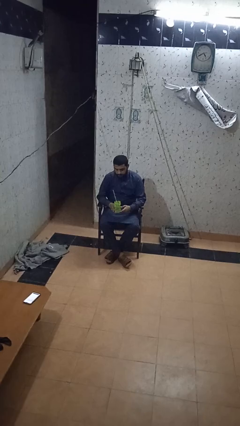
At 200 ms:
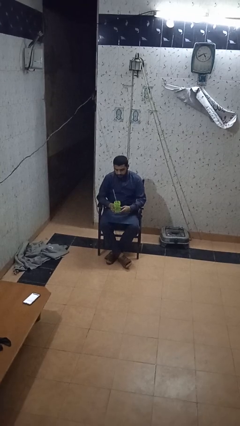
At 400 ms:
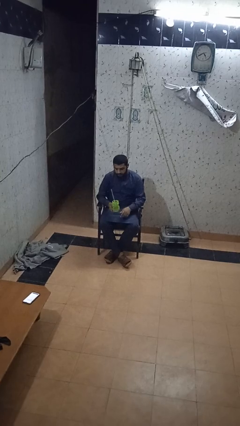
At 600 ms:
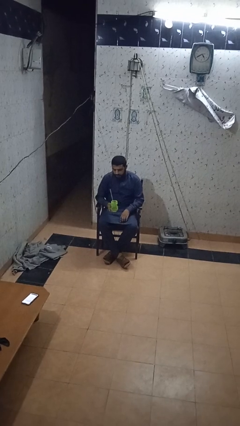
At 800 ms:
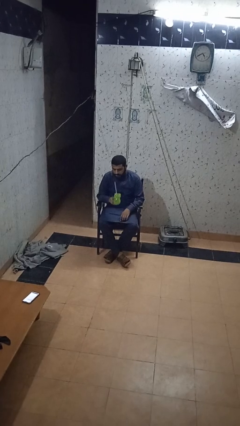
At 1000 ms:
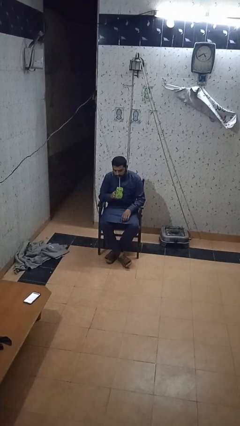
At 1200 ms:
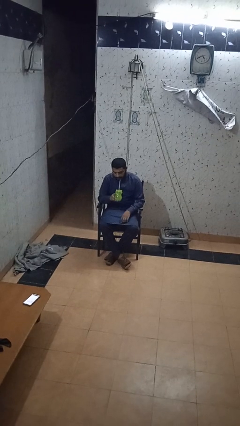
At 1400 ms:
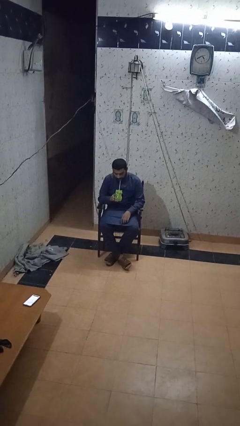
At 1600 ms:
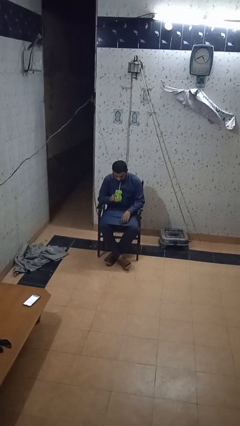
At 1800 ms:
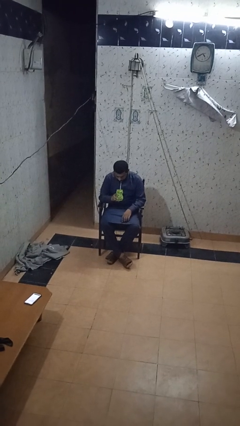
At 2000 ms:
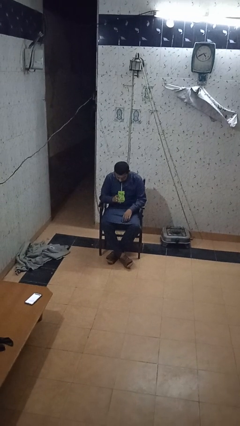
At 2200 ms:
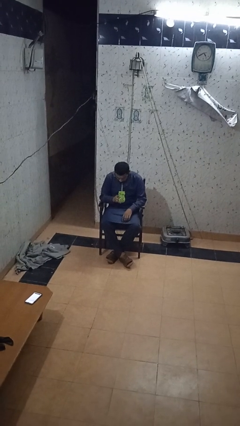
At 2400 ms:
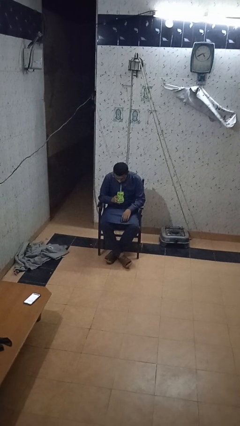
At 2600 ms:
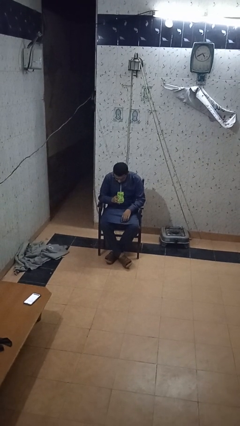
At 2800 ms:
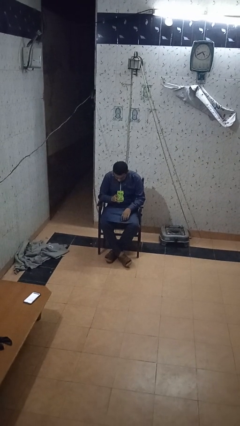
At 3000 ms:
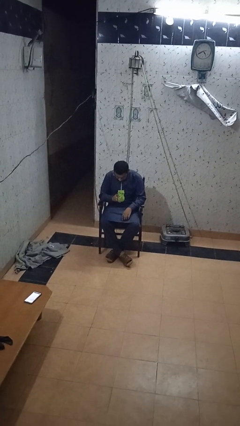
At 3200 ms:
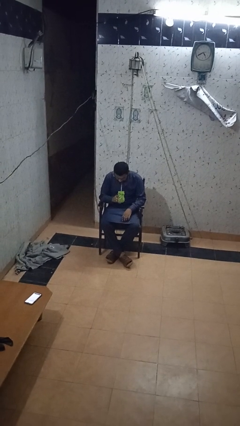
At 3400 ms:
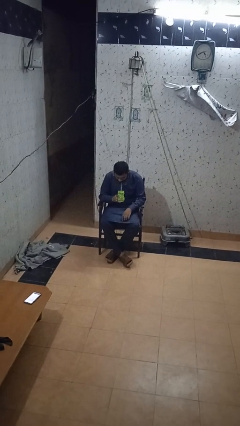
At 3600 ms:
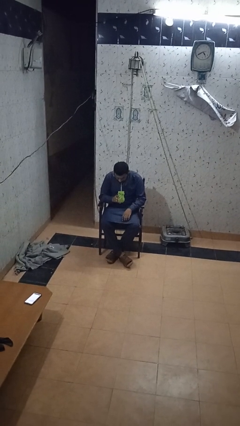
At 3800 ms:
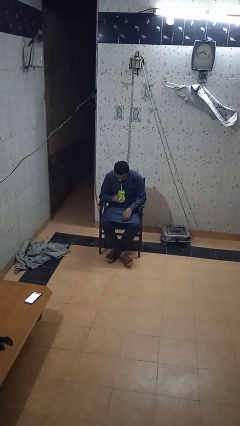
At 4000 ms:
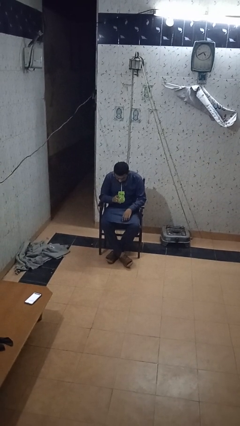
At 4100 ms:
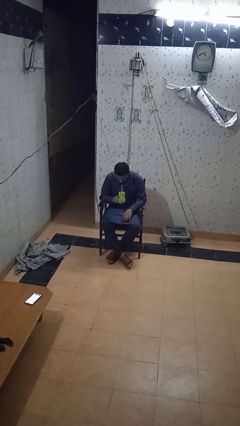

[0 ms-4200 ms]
person drinks from straw

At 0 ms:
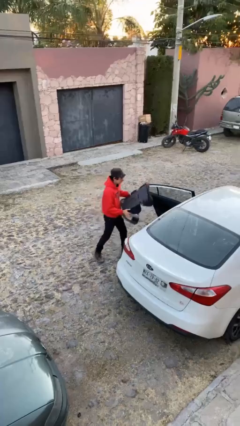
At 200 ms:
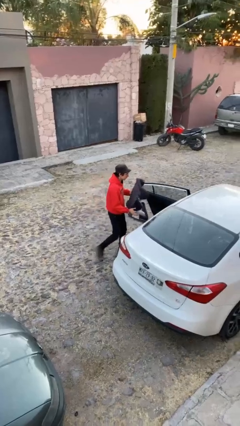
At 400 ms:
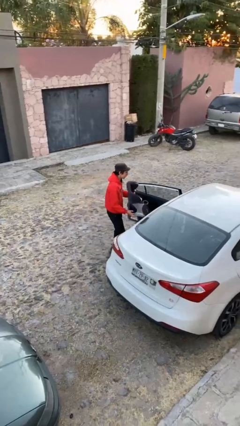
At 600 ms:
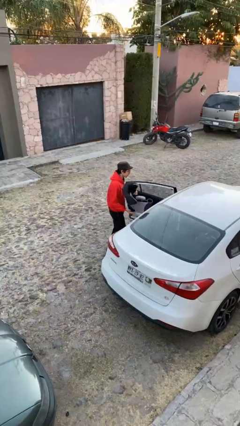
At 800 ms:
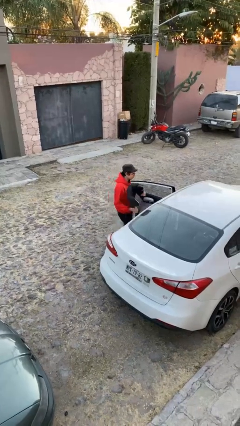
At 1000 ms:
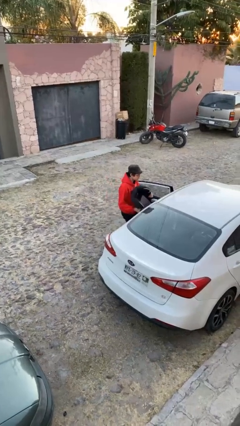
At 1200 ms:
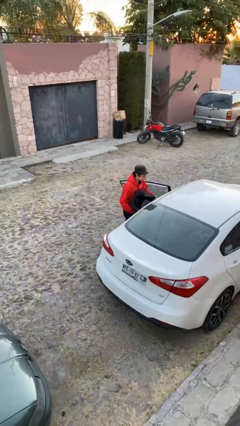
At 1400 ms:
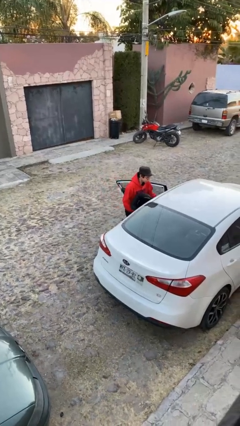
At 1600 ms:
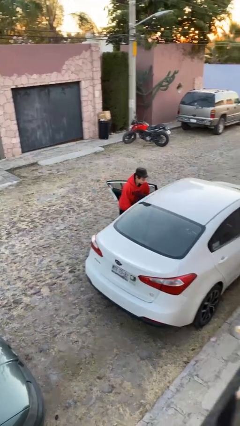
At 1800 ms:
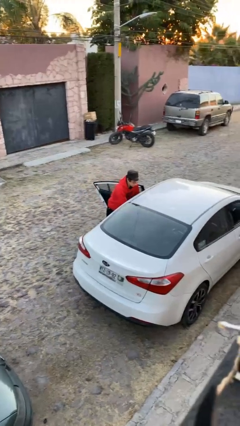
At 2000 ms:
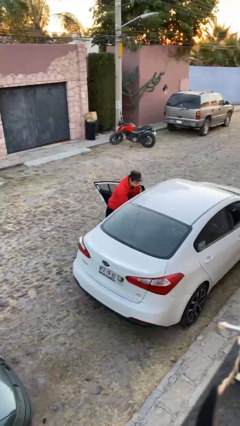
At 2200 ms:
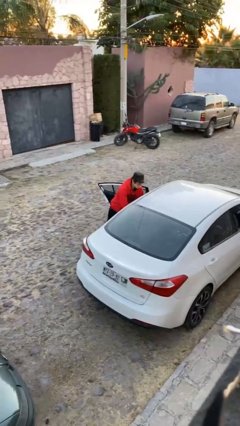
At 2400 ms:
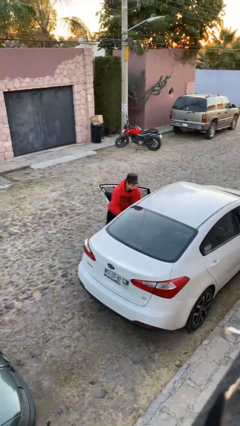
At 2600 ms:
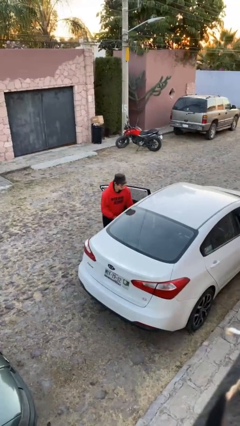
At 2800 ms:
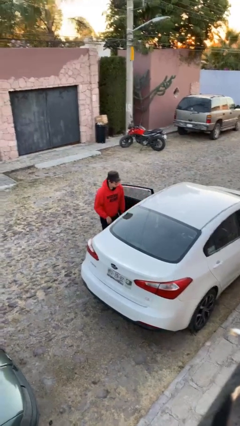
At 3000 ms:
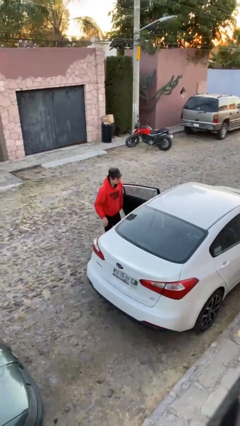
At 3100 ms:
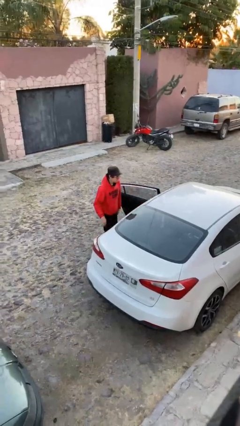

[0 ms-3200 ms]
person loads car

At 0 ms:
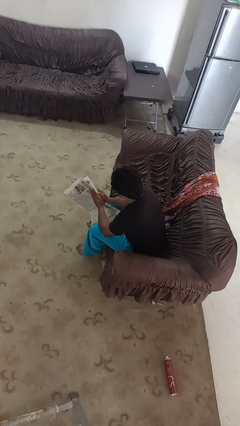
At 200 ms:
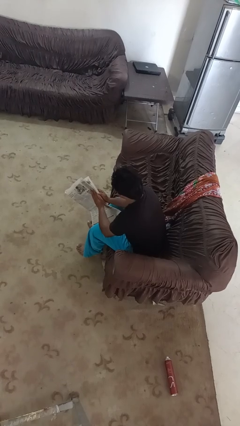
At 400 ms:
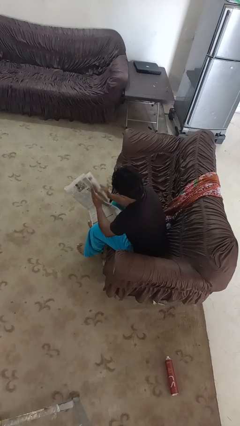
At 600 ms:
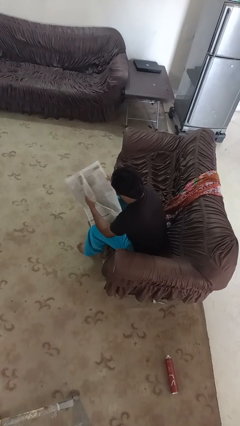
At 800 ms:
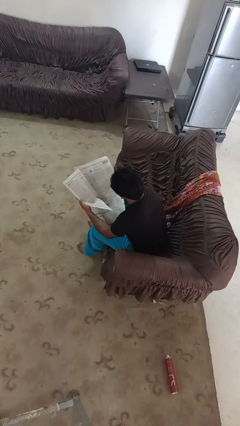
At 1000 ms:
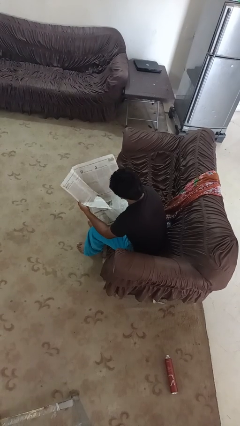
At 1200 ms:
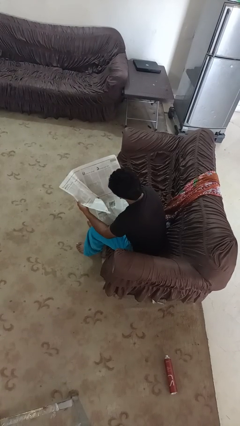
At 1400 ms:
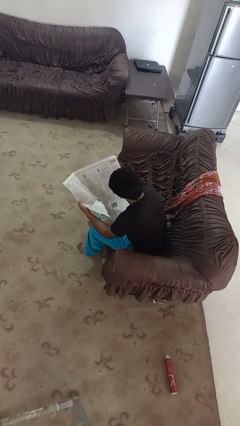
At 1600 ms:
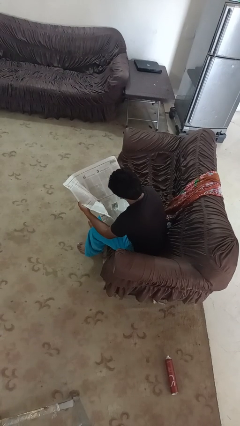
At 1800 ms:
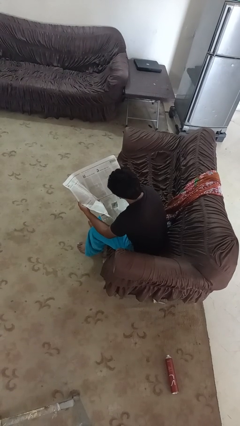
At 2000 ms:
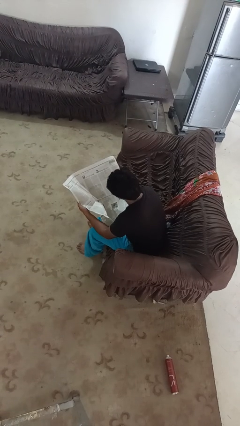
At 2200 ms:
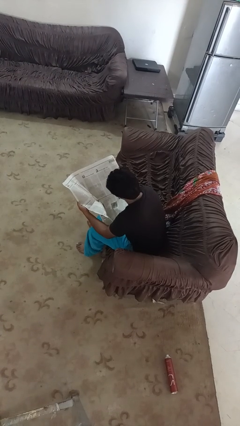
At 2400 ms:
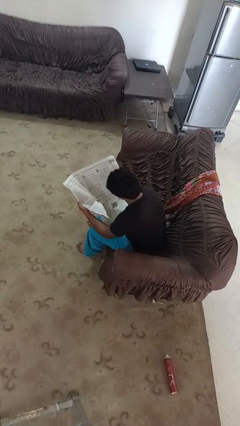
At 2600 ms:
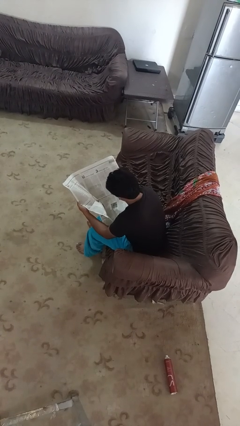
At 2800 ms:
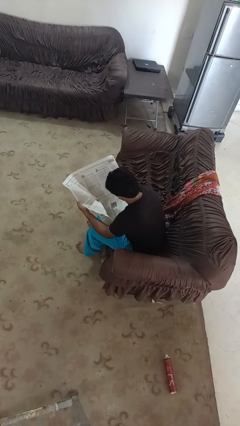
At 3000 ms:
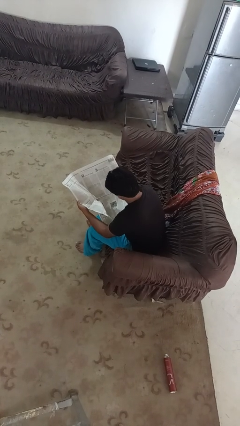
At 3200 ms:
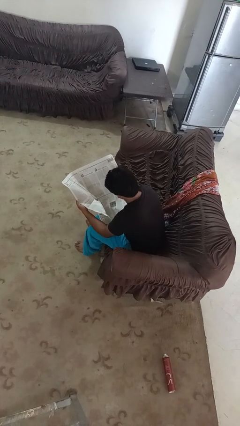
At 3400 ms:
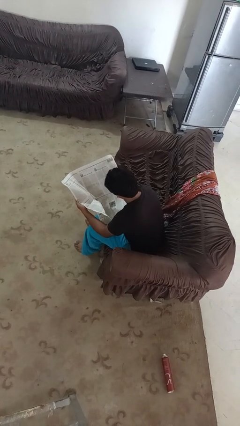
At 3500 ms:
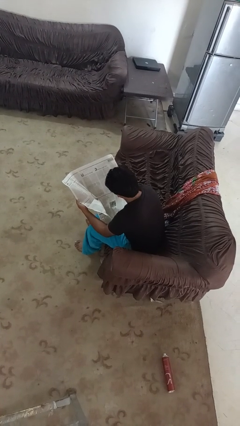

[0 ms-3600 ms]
person reads newspaper

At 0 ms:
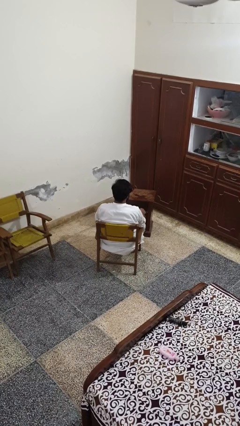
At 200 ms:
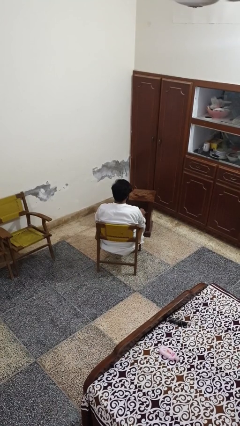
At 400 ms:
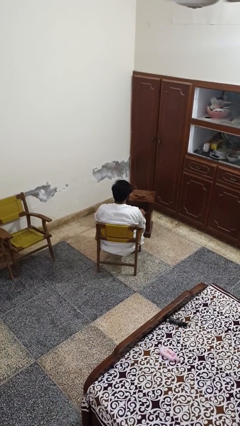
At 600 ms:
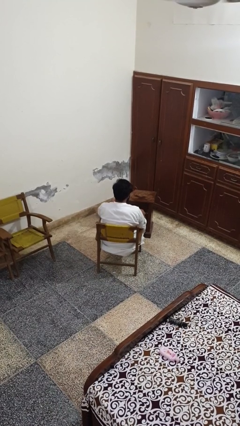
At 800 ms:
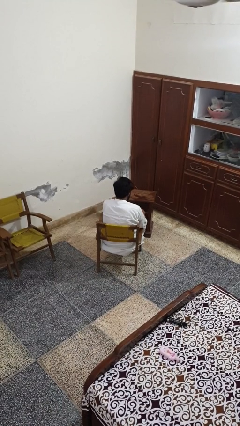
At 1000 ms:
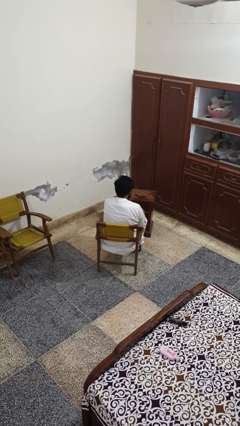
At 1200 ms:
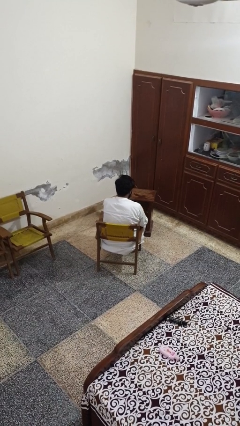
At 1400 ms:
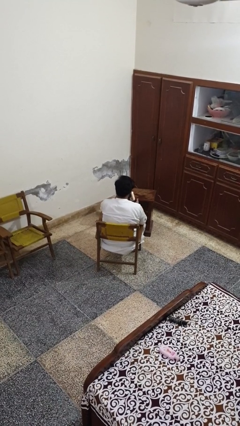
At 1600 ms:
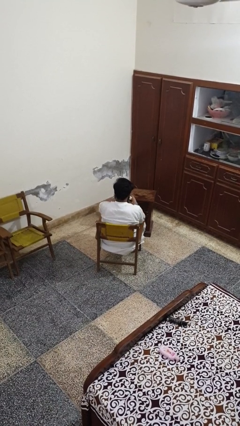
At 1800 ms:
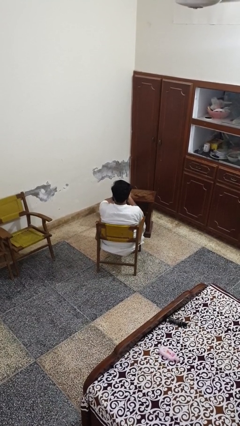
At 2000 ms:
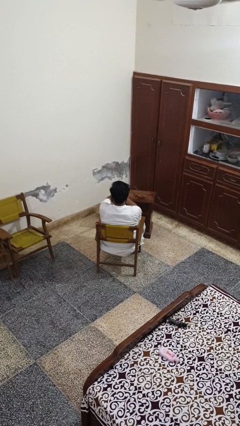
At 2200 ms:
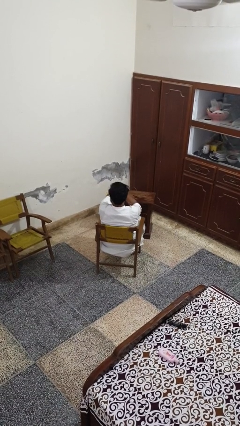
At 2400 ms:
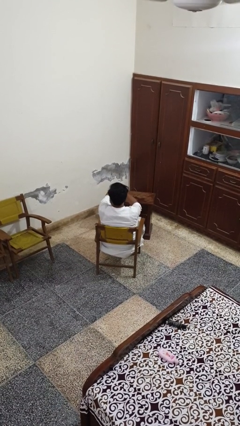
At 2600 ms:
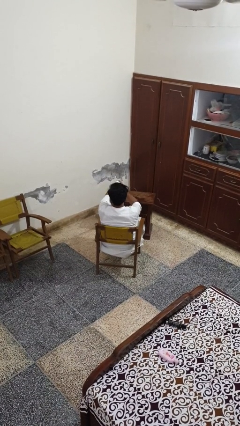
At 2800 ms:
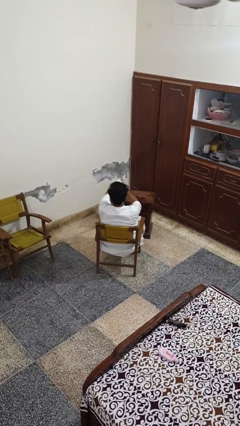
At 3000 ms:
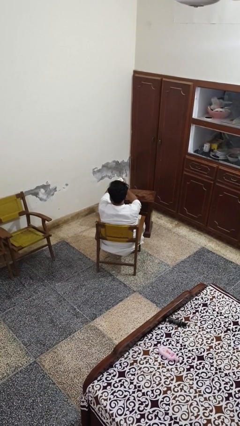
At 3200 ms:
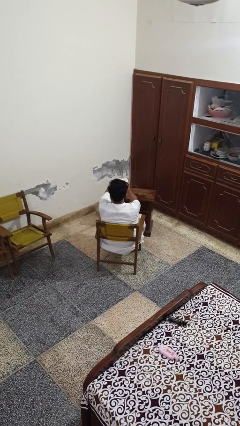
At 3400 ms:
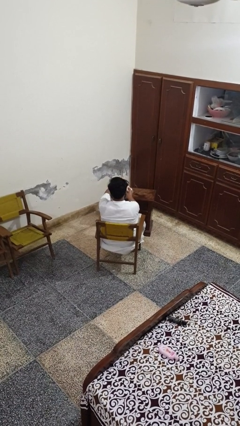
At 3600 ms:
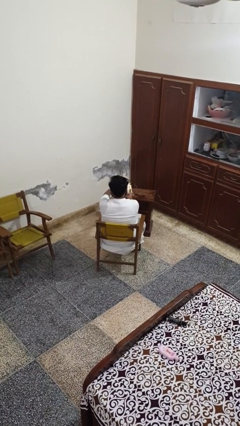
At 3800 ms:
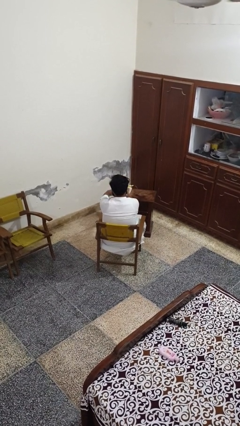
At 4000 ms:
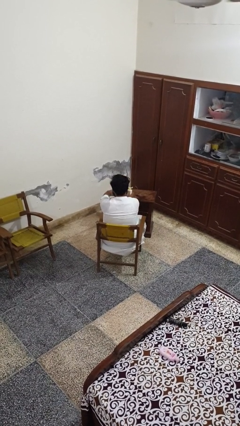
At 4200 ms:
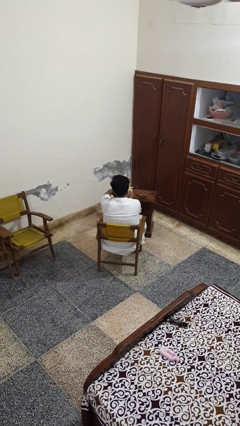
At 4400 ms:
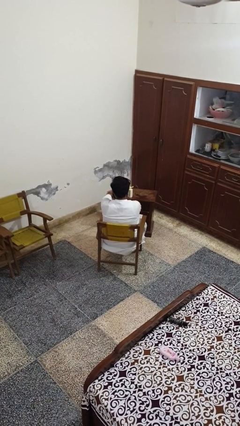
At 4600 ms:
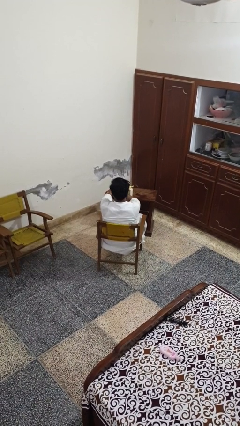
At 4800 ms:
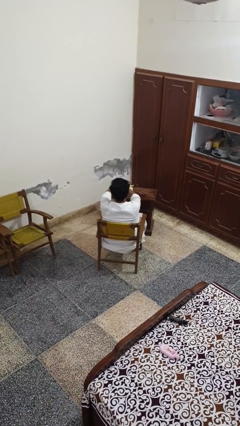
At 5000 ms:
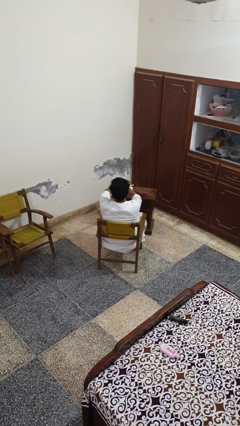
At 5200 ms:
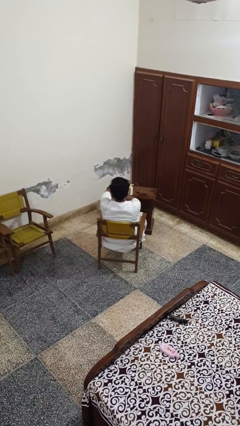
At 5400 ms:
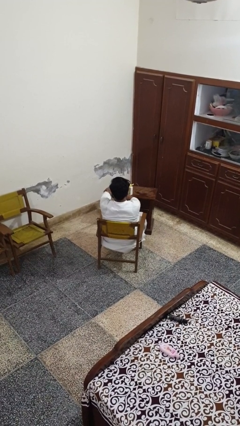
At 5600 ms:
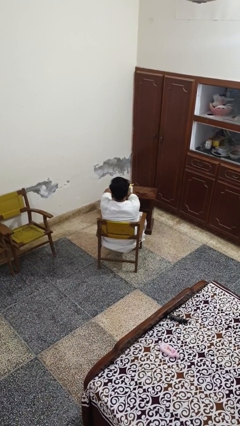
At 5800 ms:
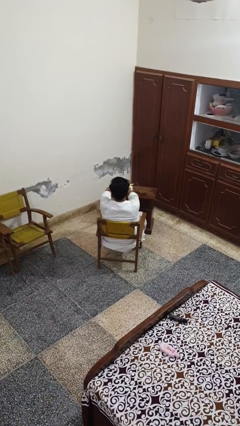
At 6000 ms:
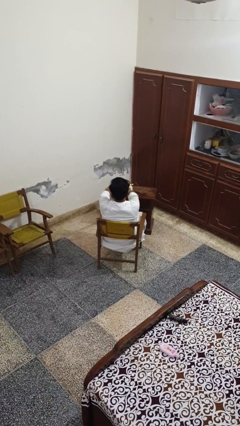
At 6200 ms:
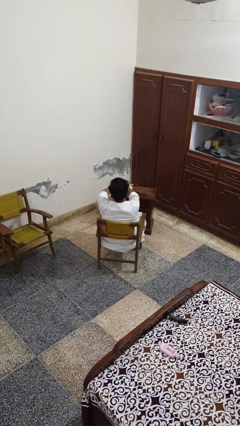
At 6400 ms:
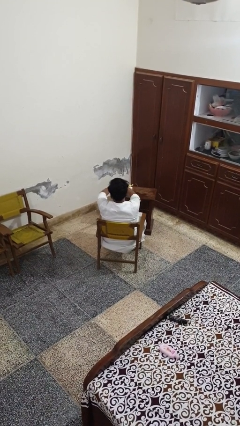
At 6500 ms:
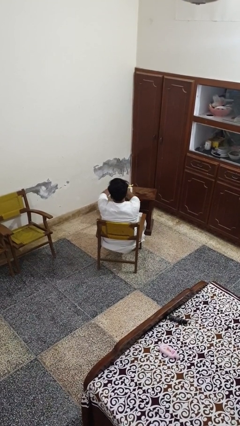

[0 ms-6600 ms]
person applies sunscreen

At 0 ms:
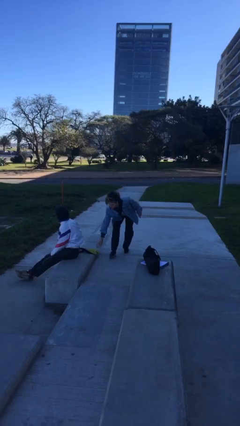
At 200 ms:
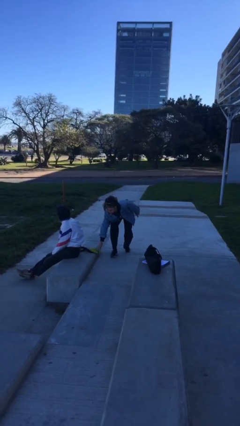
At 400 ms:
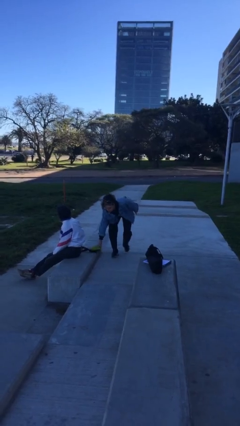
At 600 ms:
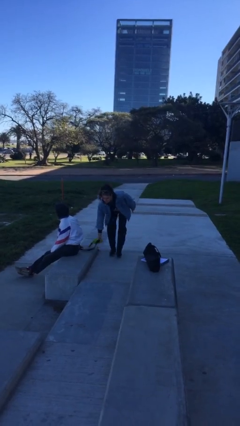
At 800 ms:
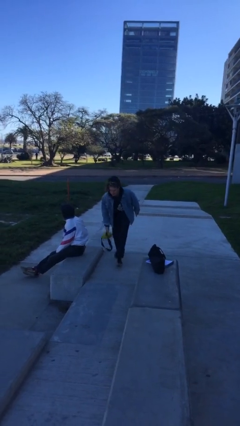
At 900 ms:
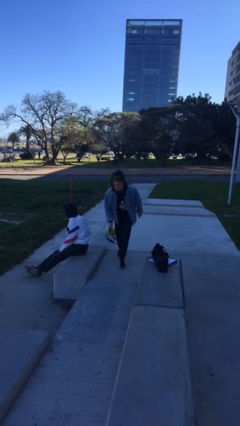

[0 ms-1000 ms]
person steals object from person
